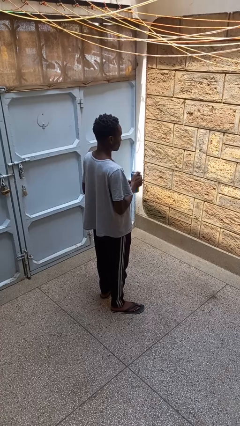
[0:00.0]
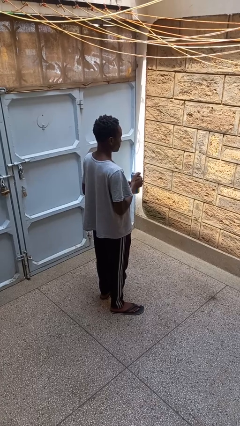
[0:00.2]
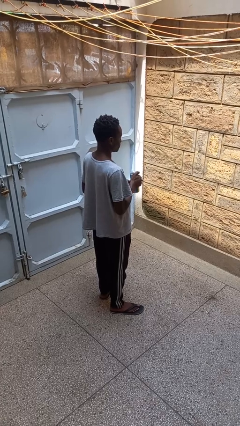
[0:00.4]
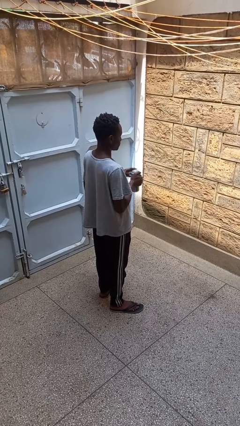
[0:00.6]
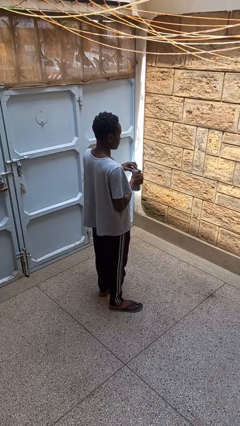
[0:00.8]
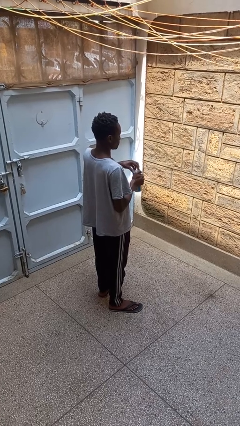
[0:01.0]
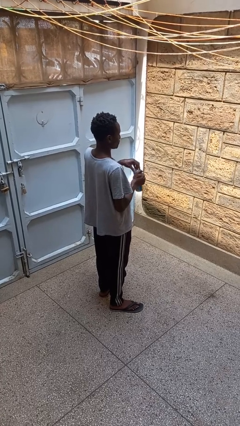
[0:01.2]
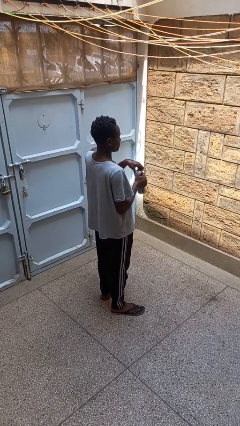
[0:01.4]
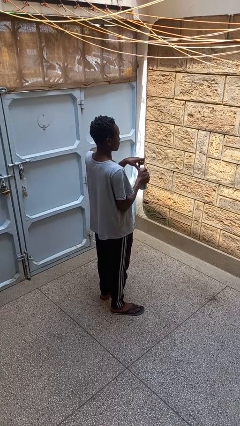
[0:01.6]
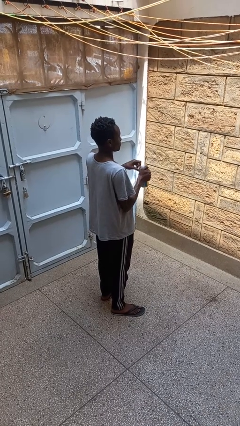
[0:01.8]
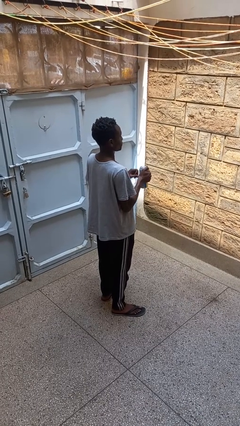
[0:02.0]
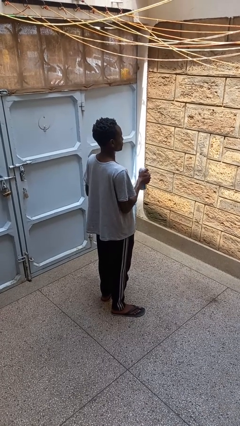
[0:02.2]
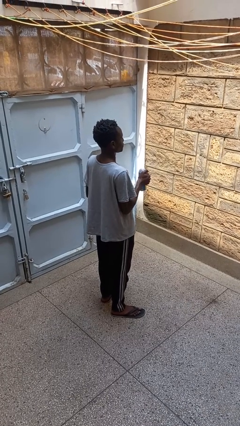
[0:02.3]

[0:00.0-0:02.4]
person opens beverage can

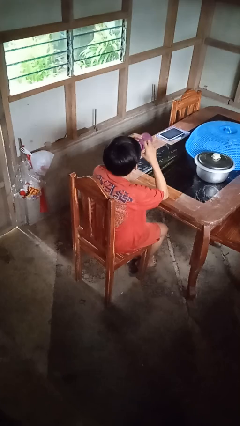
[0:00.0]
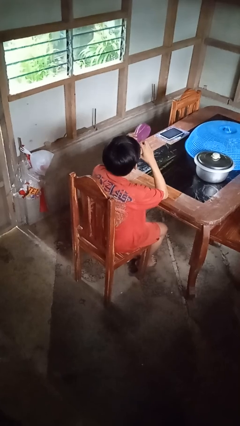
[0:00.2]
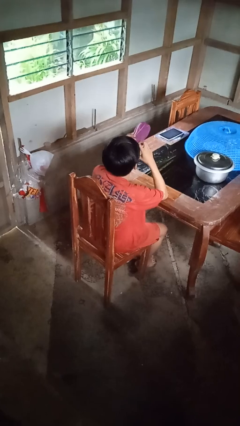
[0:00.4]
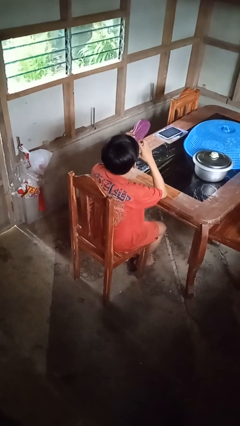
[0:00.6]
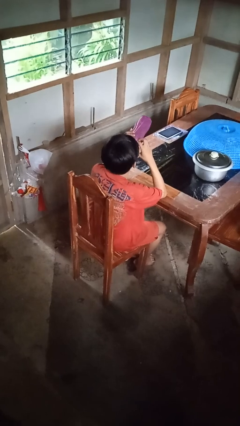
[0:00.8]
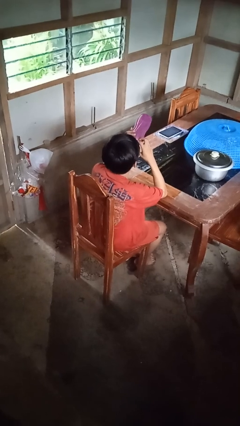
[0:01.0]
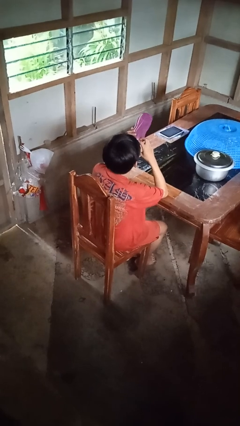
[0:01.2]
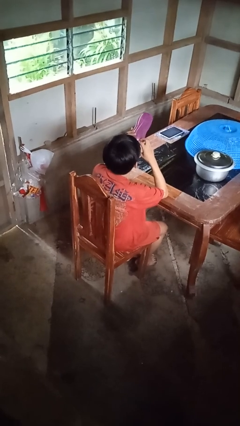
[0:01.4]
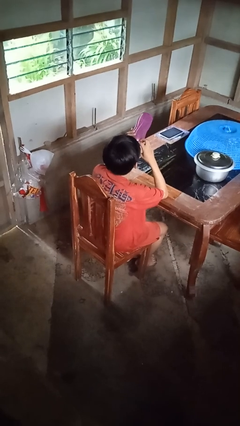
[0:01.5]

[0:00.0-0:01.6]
person drinks from bottle

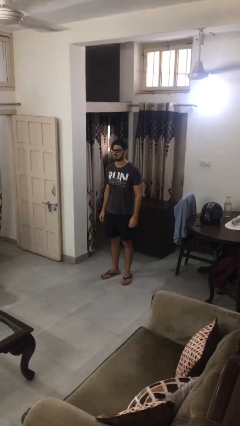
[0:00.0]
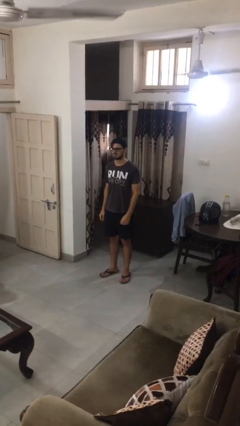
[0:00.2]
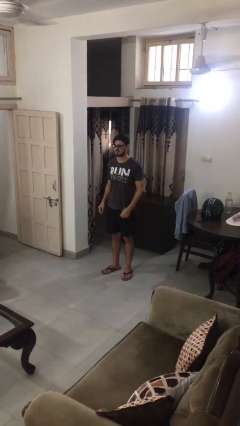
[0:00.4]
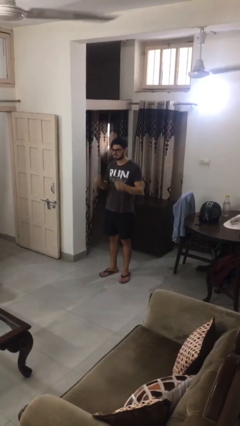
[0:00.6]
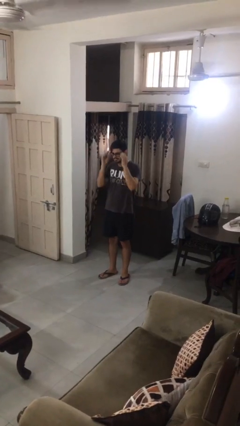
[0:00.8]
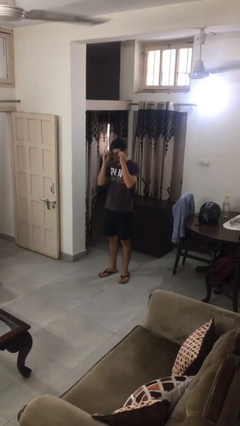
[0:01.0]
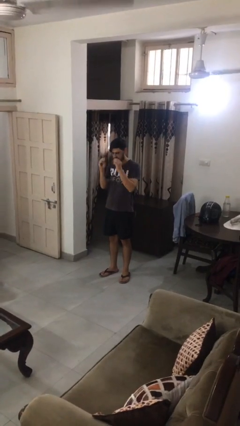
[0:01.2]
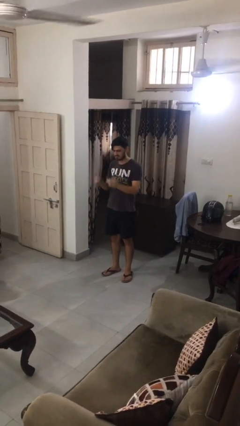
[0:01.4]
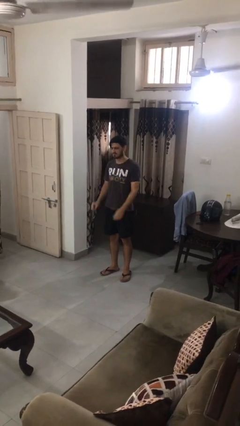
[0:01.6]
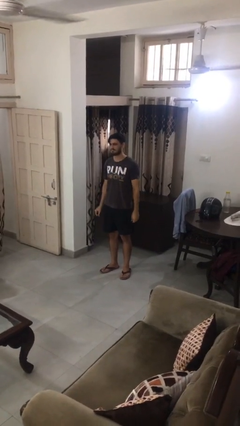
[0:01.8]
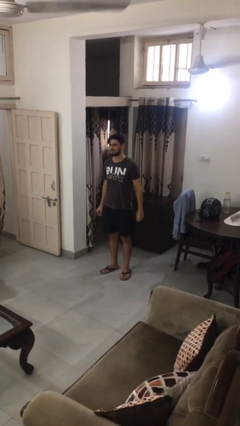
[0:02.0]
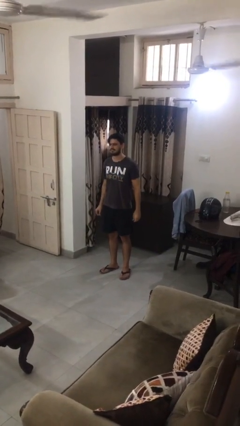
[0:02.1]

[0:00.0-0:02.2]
person takes off glasses

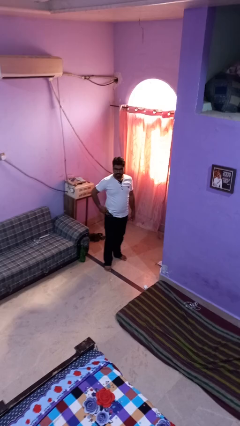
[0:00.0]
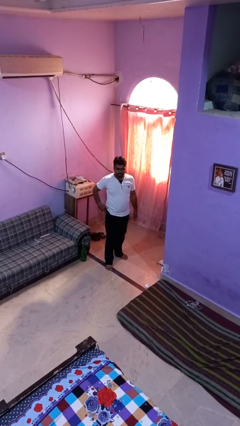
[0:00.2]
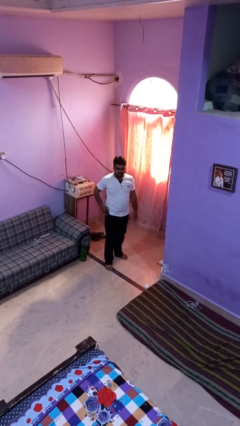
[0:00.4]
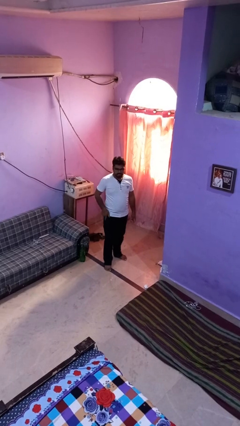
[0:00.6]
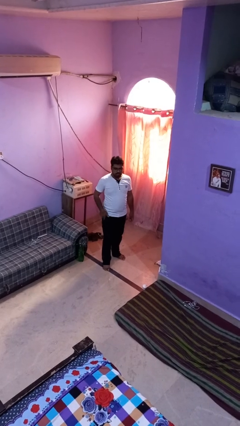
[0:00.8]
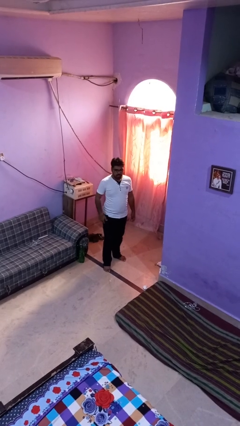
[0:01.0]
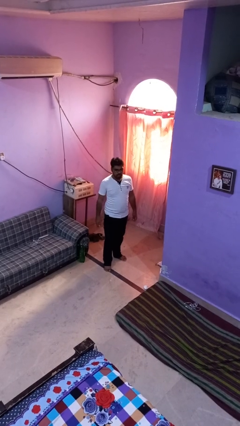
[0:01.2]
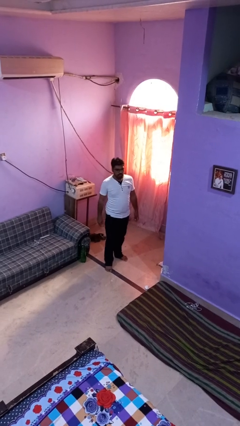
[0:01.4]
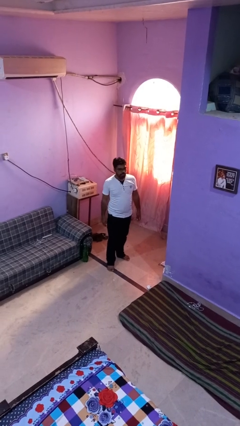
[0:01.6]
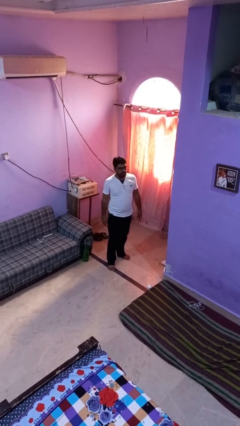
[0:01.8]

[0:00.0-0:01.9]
person puts phone into pocket

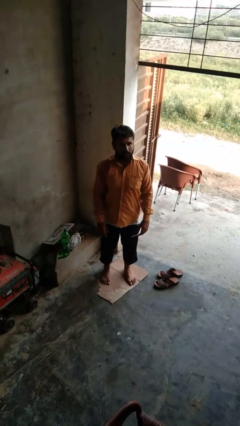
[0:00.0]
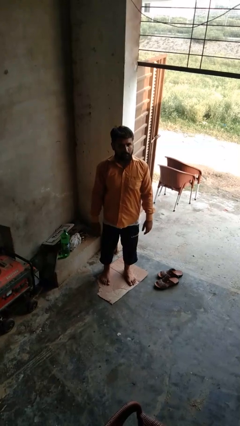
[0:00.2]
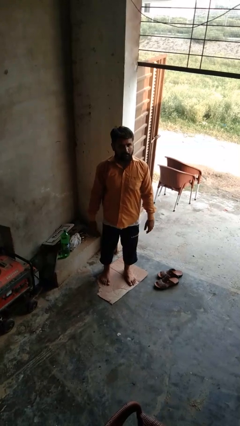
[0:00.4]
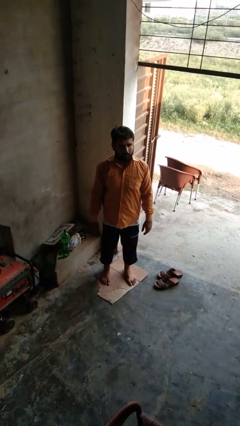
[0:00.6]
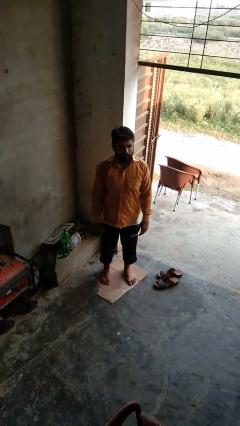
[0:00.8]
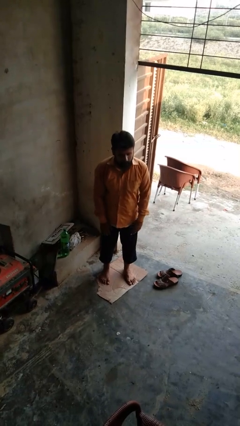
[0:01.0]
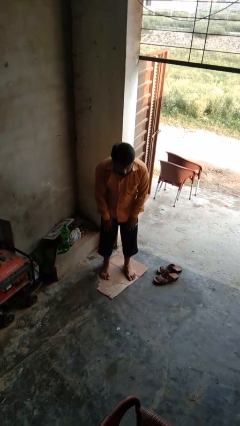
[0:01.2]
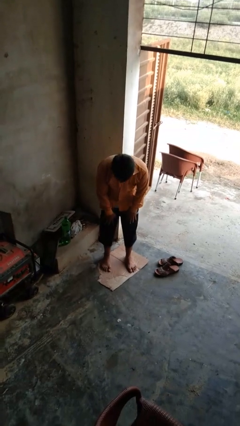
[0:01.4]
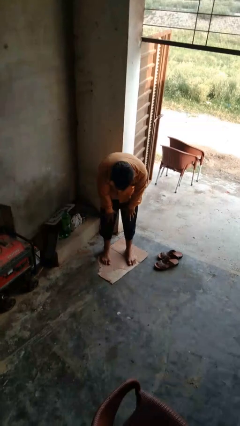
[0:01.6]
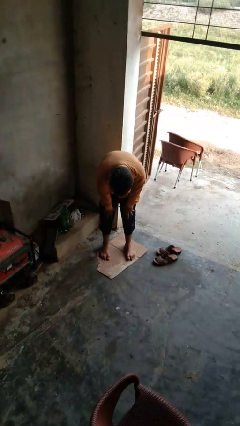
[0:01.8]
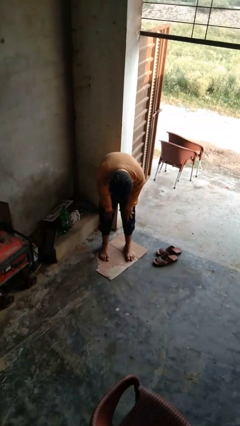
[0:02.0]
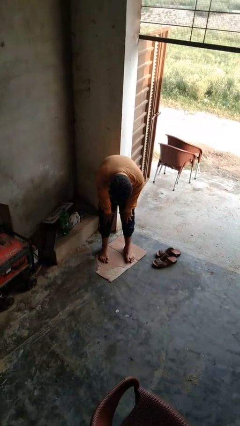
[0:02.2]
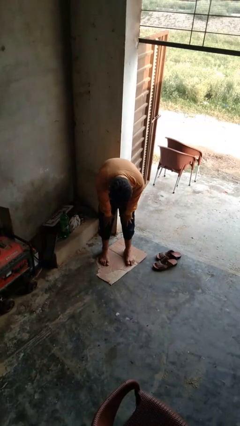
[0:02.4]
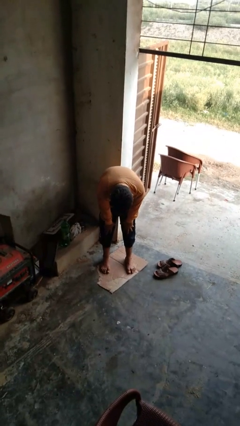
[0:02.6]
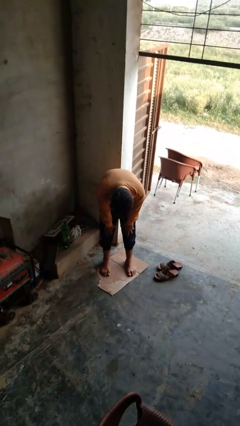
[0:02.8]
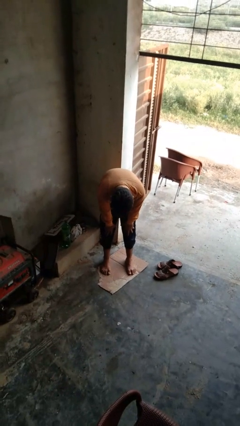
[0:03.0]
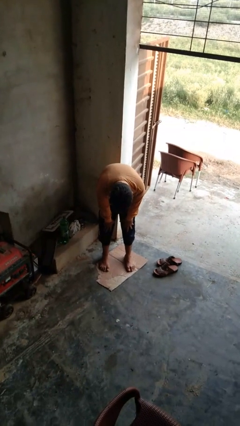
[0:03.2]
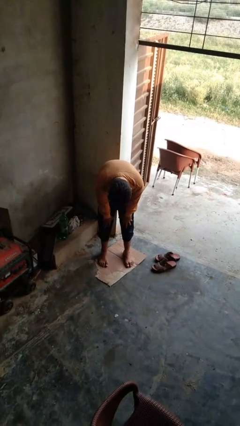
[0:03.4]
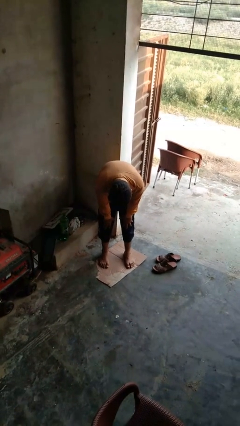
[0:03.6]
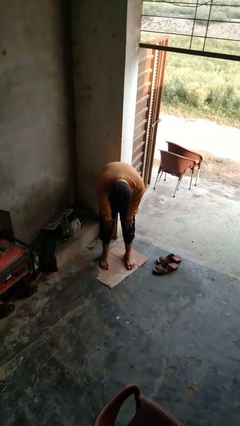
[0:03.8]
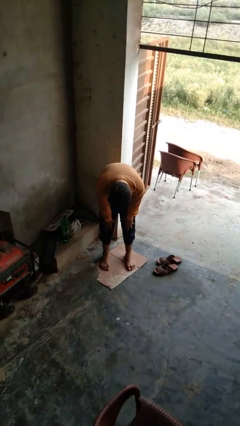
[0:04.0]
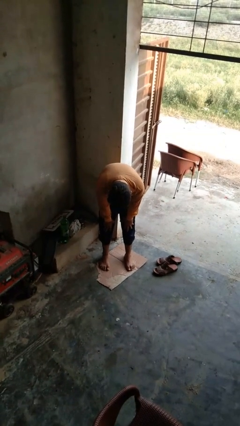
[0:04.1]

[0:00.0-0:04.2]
person bows

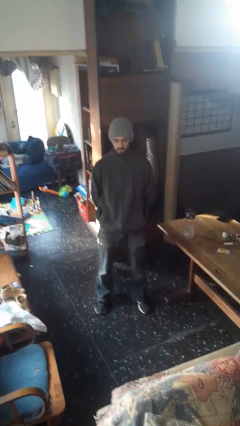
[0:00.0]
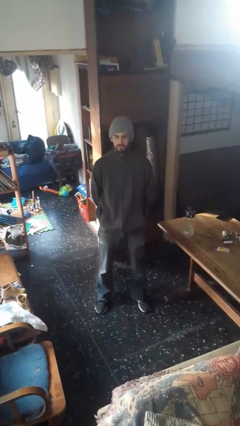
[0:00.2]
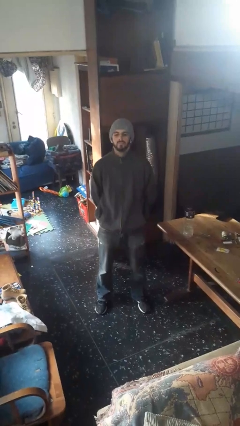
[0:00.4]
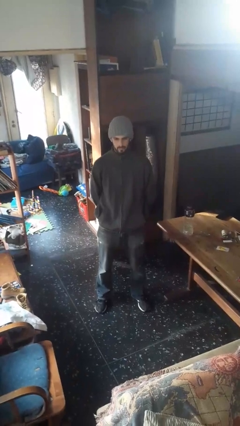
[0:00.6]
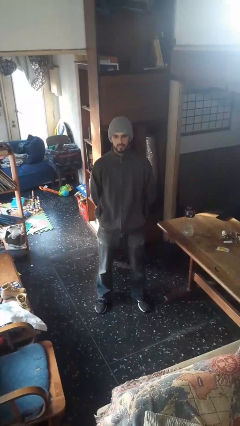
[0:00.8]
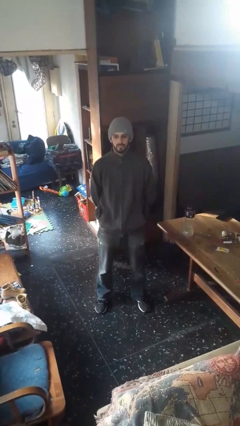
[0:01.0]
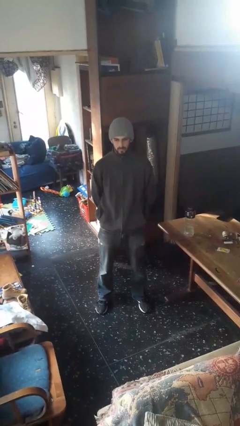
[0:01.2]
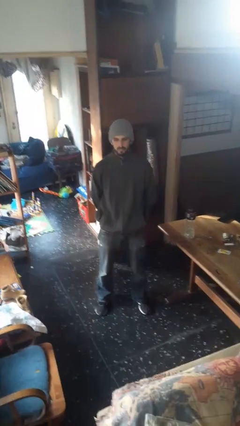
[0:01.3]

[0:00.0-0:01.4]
person nods head

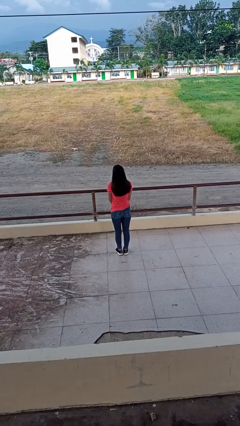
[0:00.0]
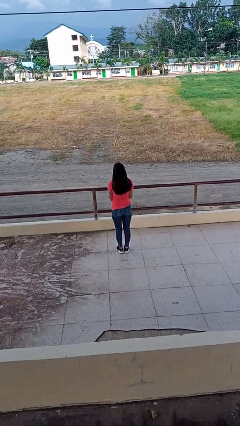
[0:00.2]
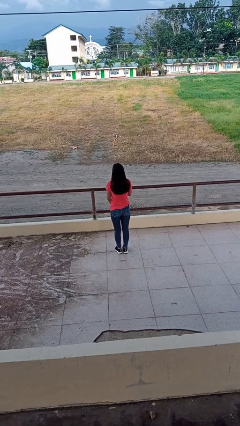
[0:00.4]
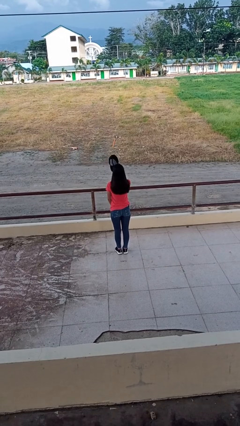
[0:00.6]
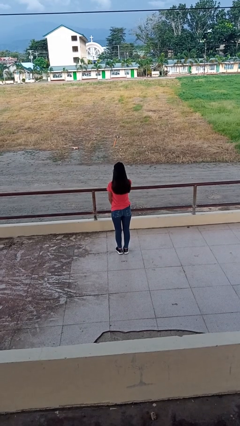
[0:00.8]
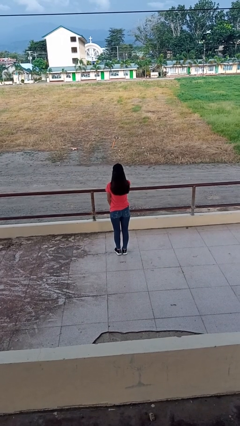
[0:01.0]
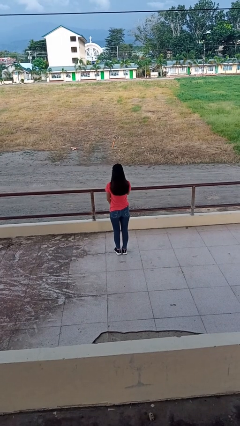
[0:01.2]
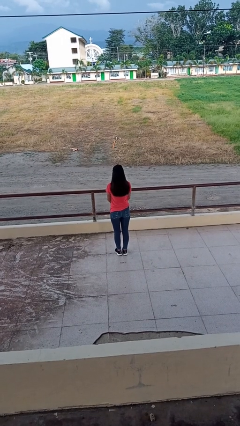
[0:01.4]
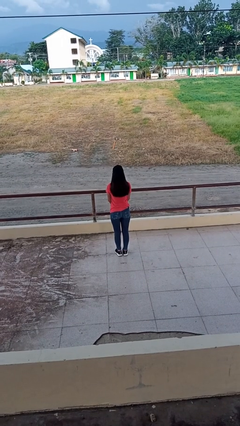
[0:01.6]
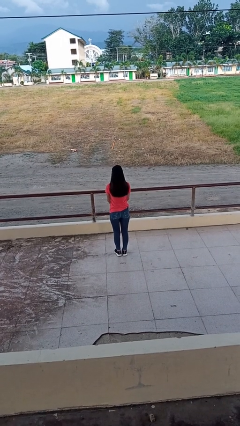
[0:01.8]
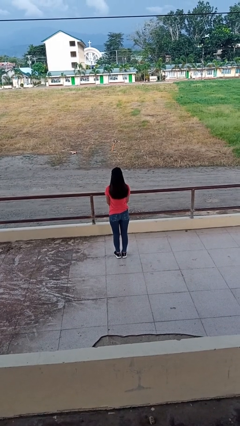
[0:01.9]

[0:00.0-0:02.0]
person puts on hat

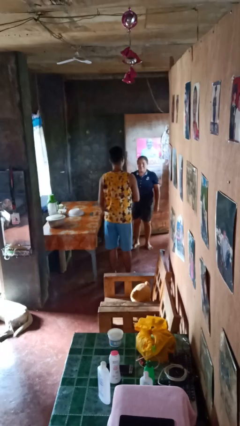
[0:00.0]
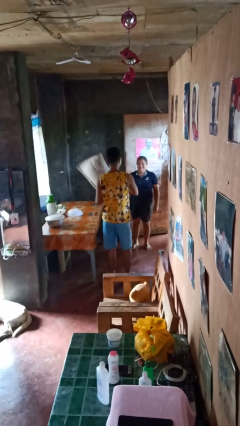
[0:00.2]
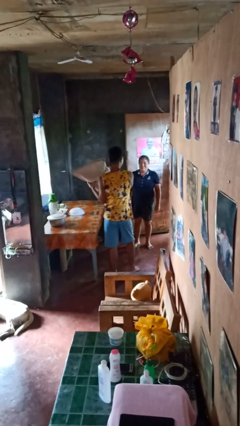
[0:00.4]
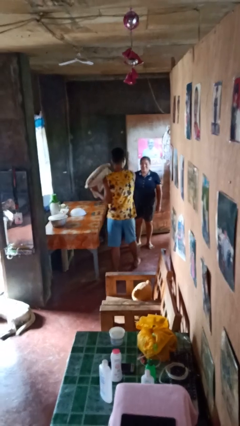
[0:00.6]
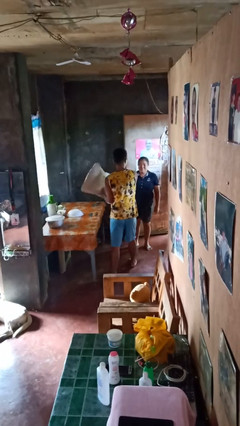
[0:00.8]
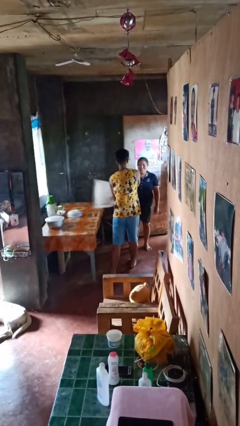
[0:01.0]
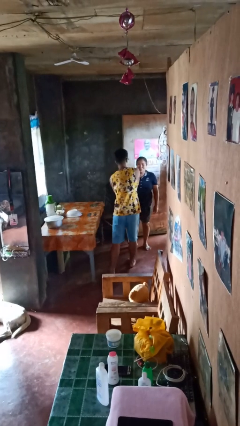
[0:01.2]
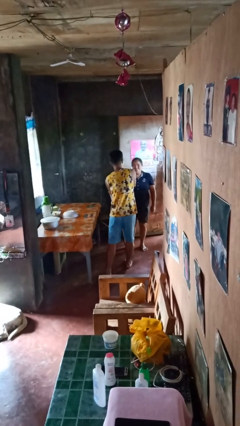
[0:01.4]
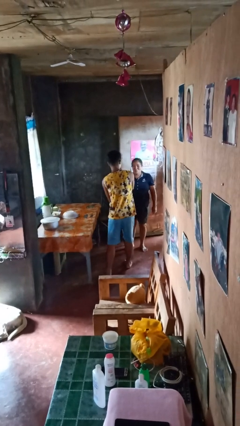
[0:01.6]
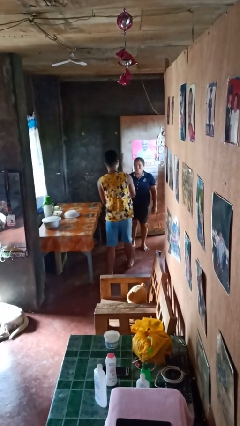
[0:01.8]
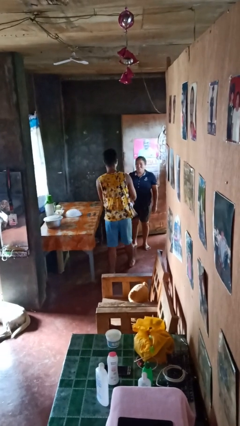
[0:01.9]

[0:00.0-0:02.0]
person hits person with pillow
